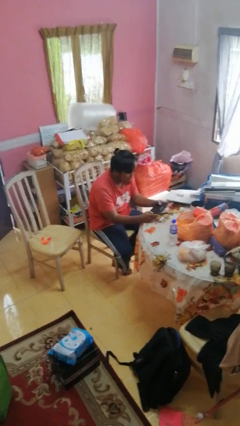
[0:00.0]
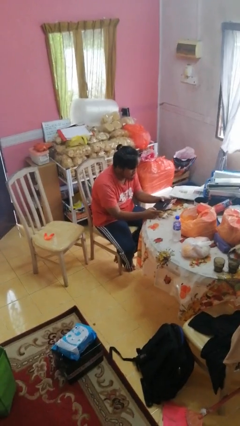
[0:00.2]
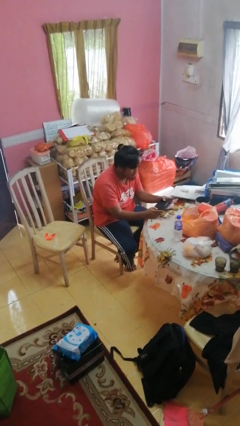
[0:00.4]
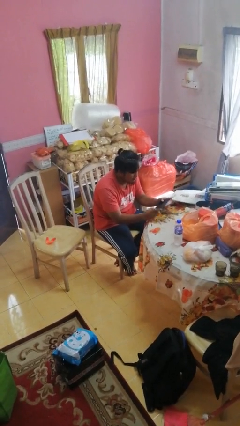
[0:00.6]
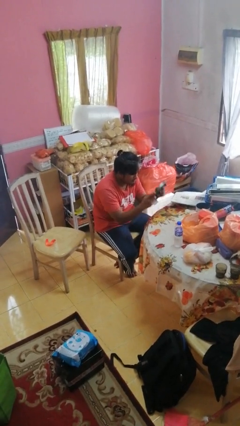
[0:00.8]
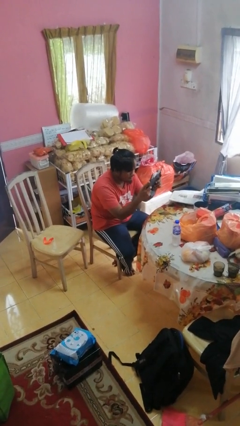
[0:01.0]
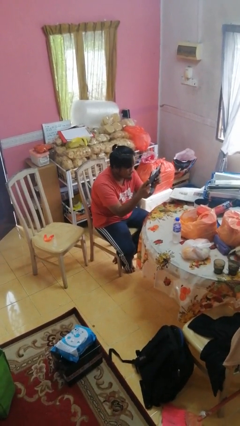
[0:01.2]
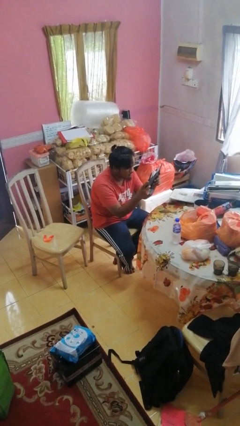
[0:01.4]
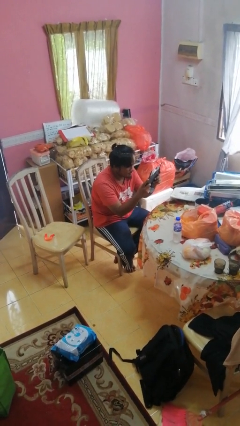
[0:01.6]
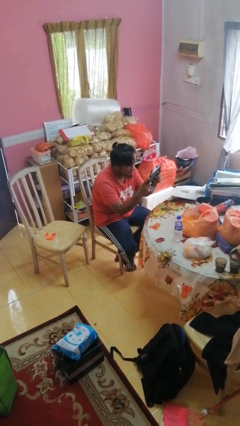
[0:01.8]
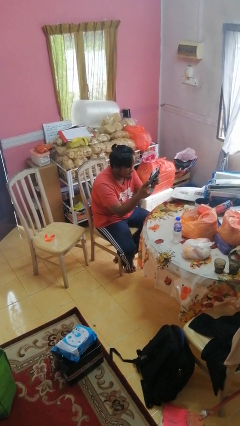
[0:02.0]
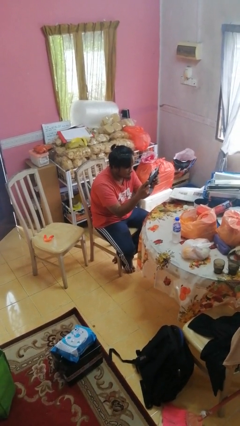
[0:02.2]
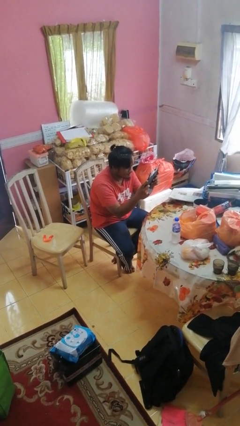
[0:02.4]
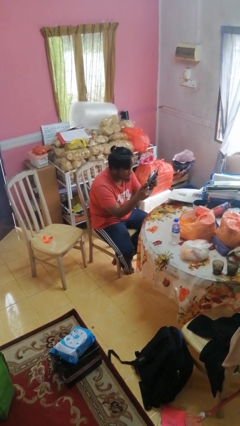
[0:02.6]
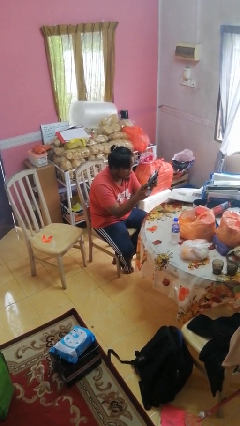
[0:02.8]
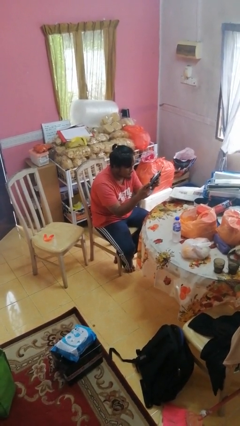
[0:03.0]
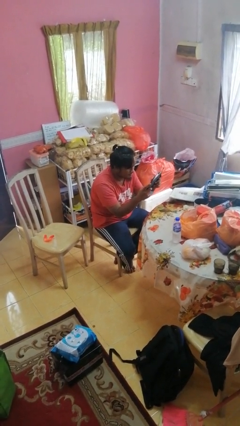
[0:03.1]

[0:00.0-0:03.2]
person interacts with handheld game

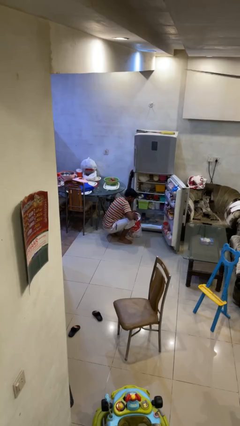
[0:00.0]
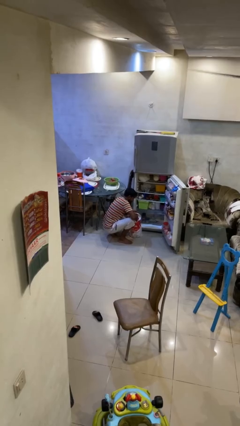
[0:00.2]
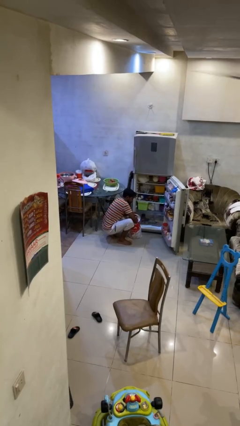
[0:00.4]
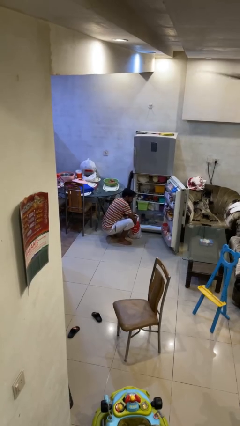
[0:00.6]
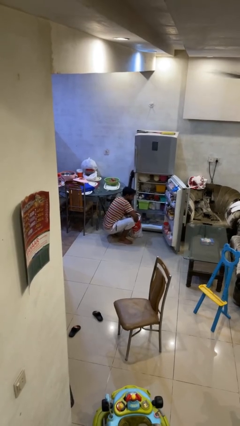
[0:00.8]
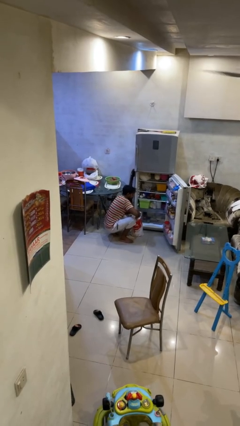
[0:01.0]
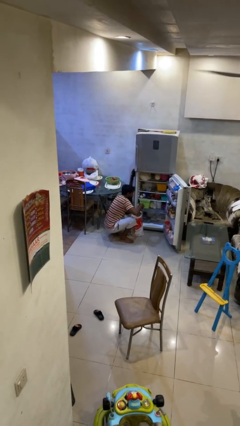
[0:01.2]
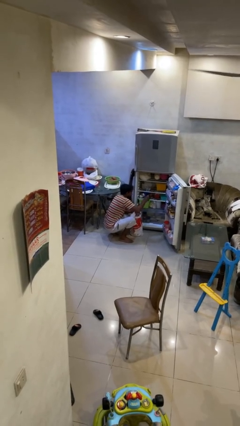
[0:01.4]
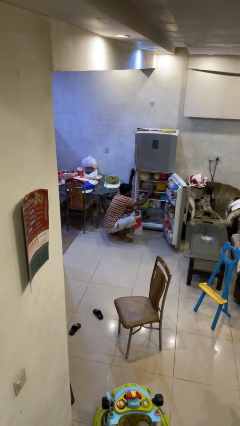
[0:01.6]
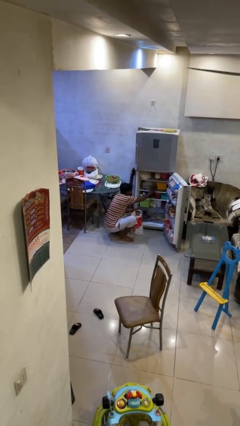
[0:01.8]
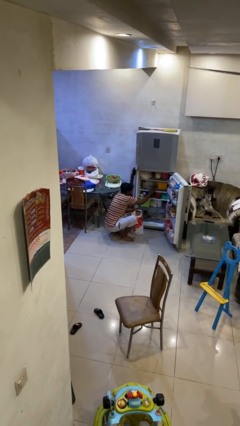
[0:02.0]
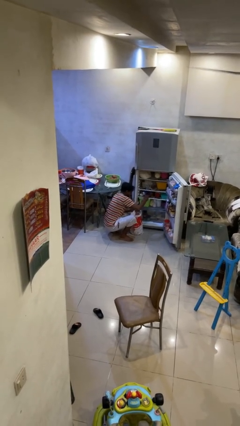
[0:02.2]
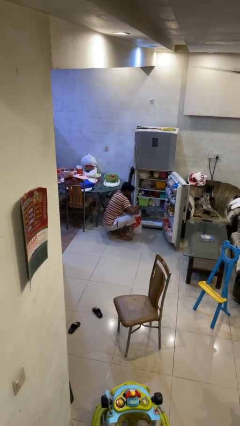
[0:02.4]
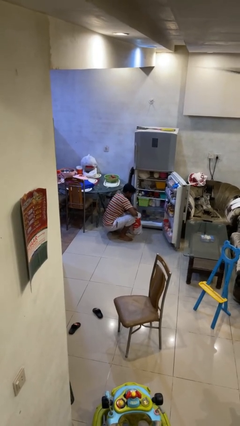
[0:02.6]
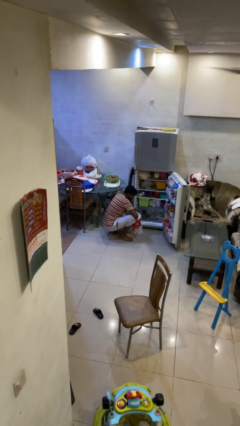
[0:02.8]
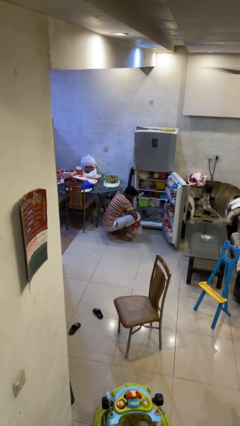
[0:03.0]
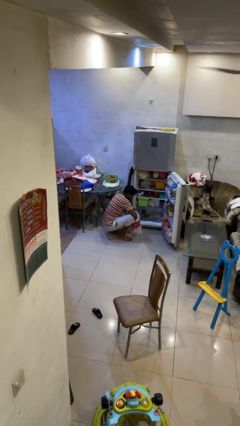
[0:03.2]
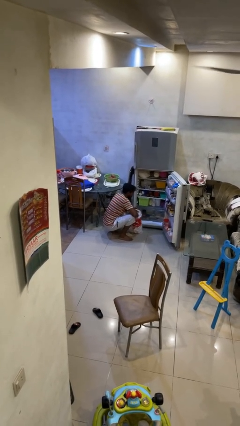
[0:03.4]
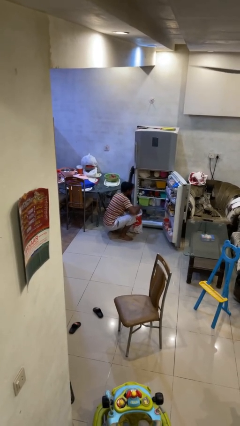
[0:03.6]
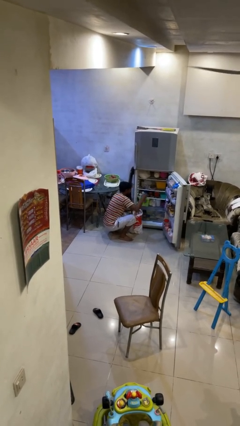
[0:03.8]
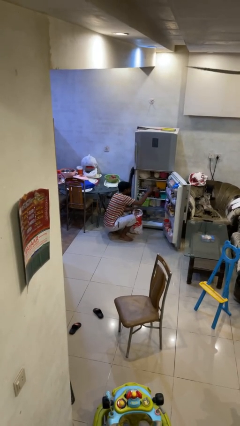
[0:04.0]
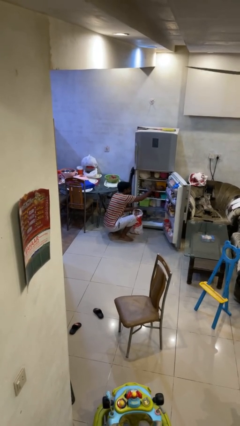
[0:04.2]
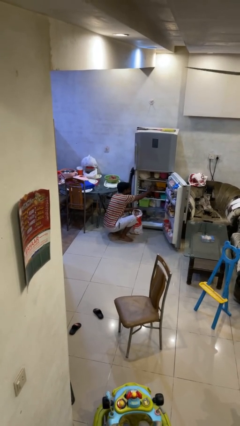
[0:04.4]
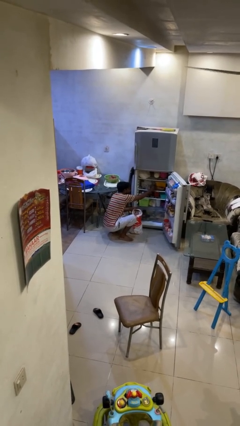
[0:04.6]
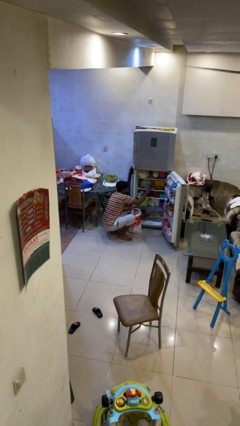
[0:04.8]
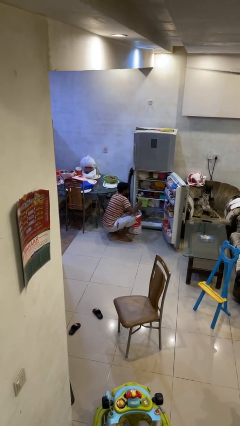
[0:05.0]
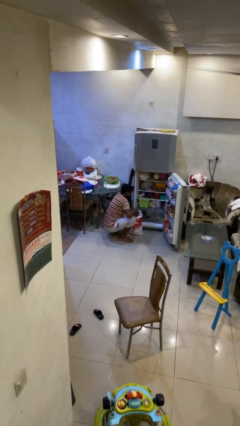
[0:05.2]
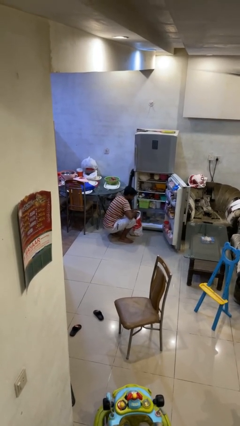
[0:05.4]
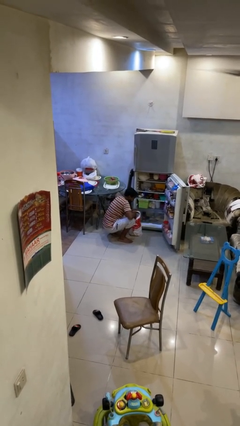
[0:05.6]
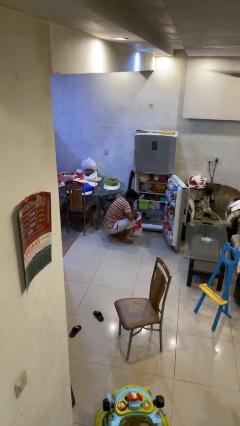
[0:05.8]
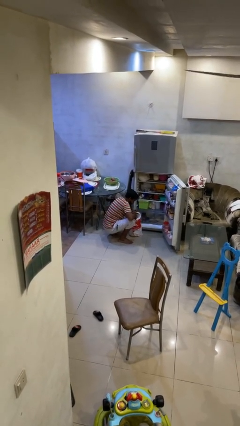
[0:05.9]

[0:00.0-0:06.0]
person loads groceries into refrigerator

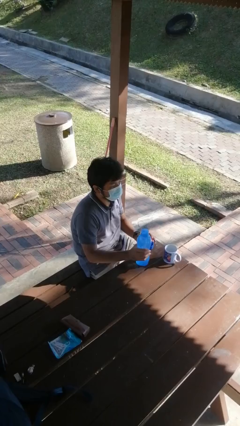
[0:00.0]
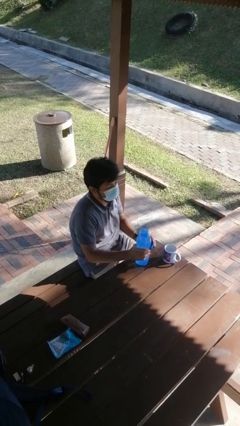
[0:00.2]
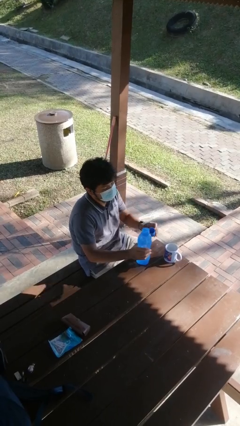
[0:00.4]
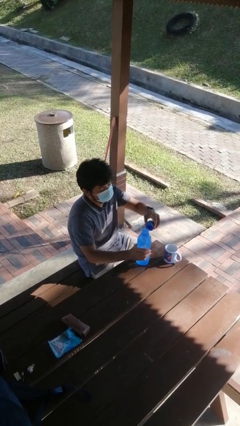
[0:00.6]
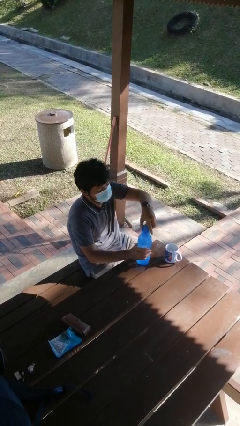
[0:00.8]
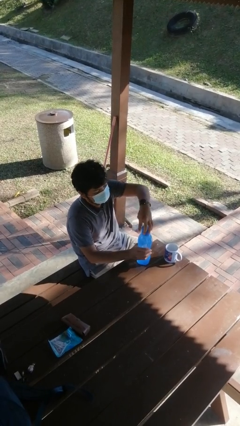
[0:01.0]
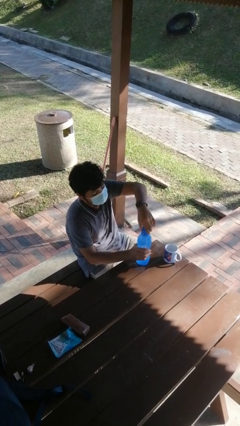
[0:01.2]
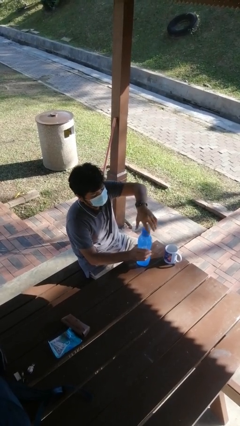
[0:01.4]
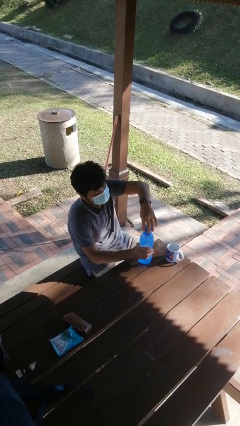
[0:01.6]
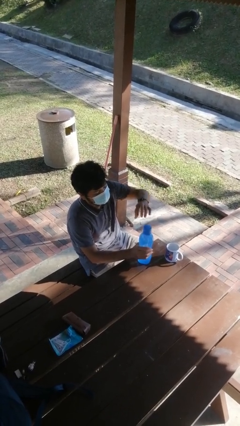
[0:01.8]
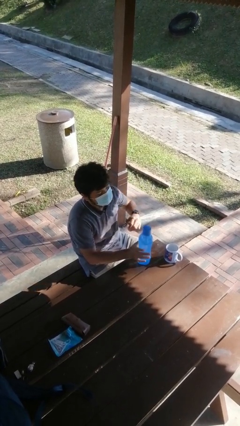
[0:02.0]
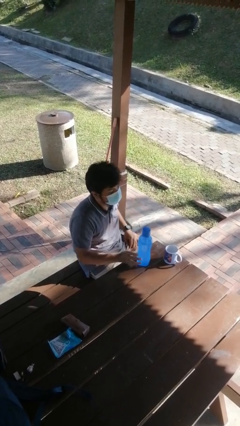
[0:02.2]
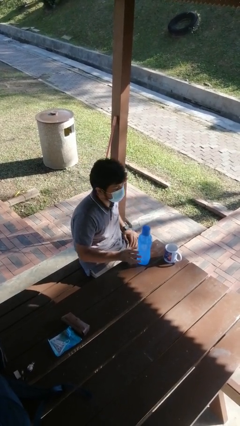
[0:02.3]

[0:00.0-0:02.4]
person screws lid to bottle

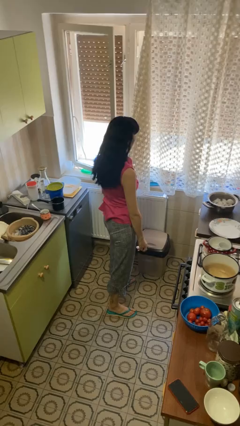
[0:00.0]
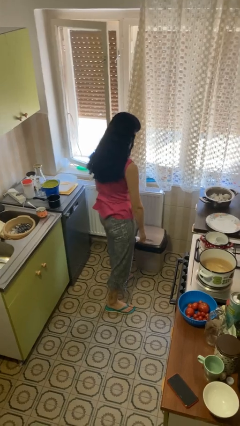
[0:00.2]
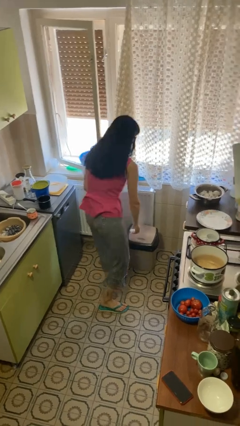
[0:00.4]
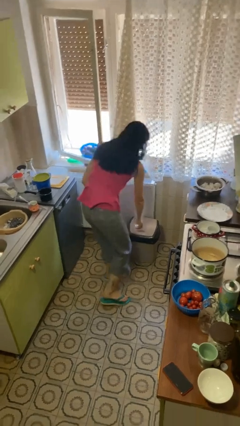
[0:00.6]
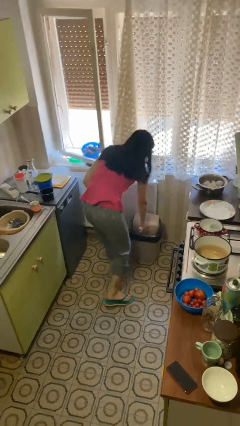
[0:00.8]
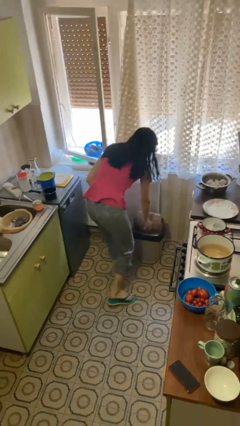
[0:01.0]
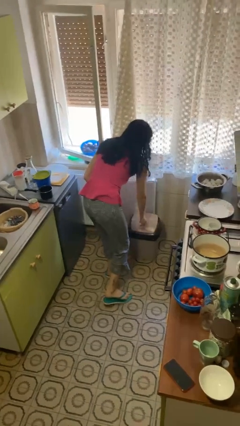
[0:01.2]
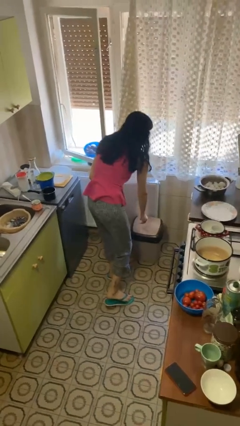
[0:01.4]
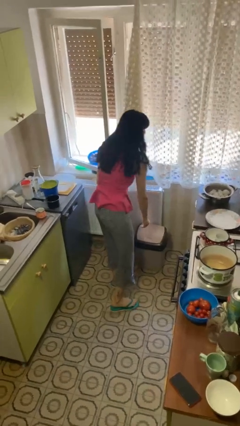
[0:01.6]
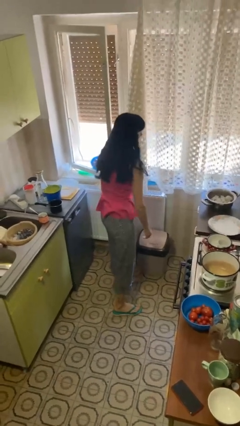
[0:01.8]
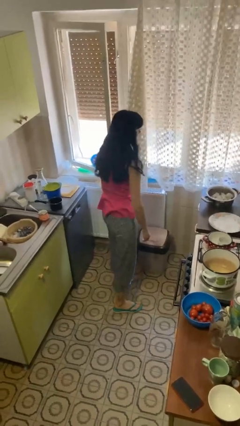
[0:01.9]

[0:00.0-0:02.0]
person discards trash

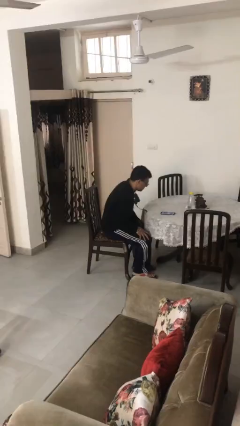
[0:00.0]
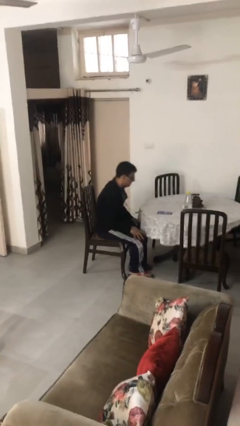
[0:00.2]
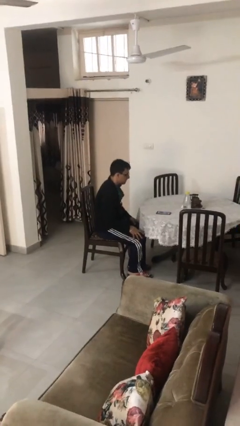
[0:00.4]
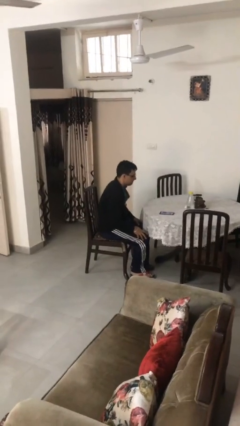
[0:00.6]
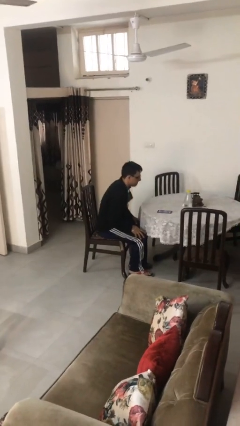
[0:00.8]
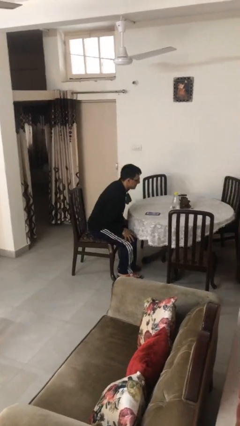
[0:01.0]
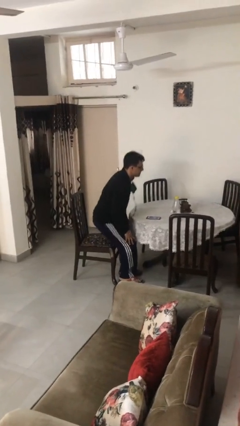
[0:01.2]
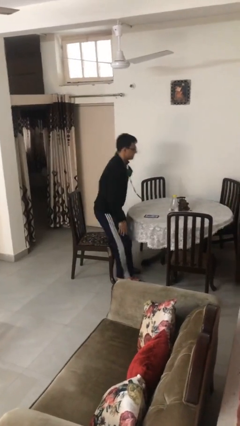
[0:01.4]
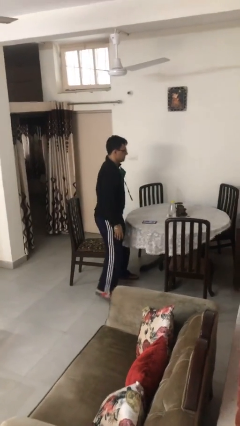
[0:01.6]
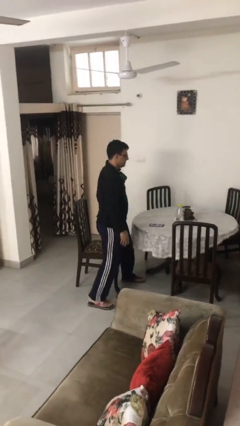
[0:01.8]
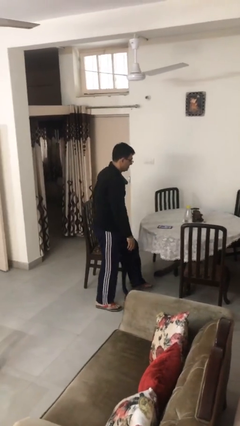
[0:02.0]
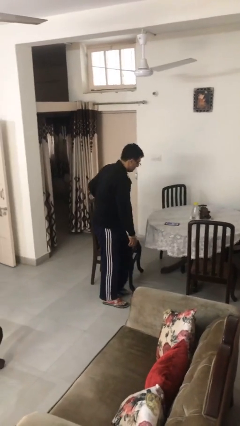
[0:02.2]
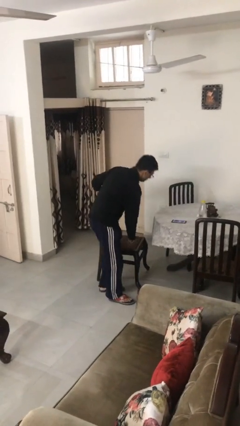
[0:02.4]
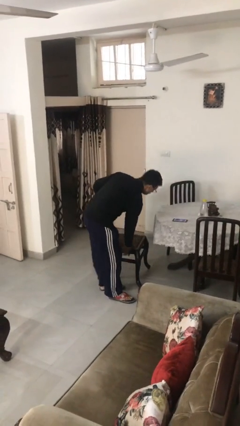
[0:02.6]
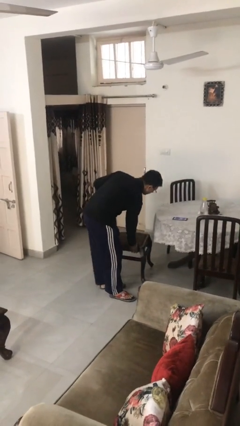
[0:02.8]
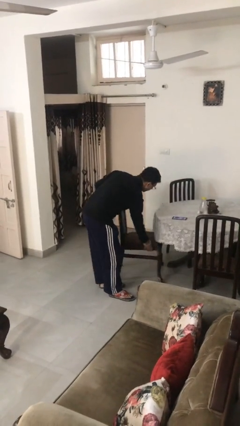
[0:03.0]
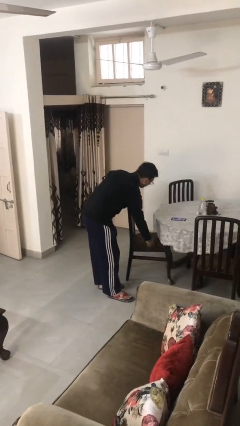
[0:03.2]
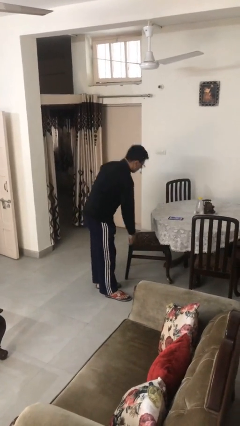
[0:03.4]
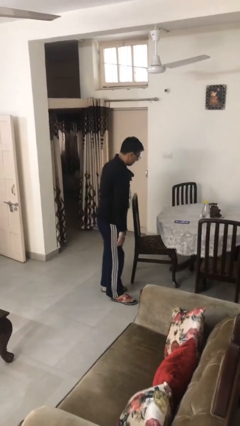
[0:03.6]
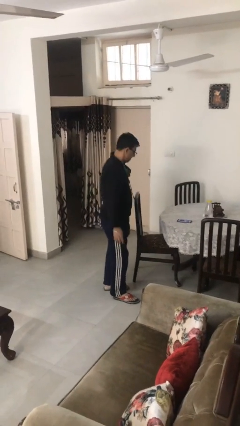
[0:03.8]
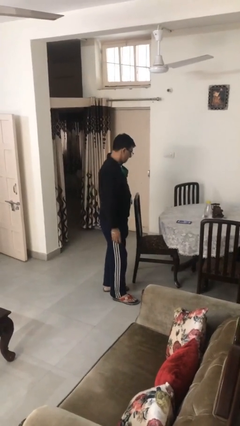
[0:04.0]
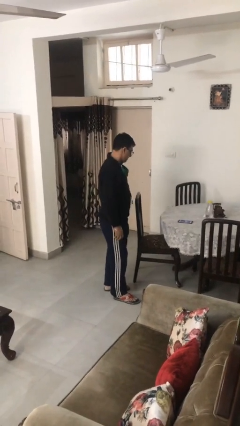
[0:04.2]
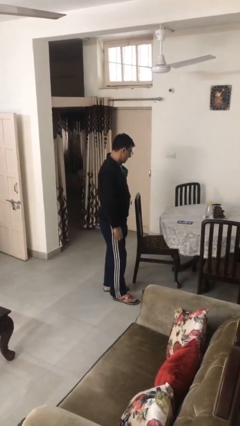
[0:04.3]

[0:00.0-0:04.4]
person stands up
